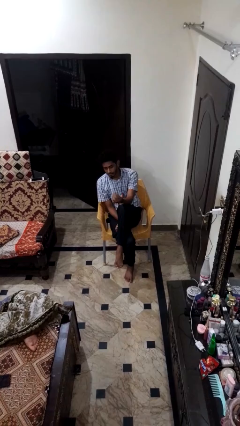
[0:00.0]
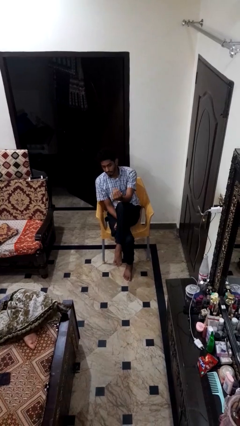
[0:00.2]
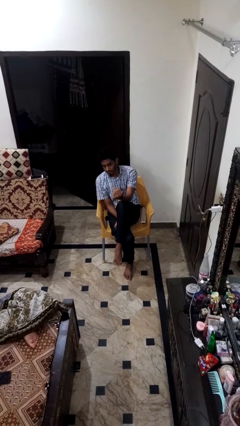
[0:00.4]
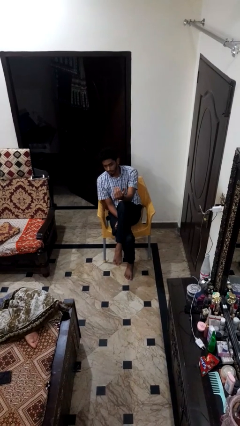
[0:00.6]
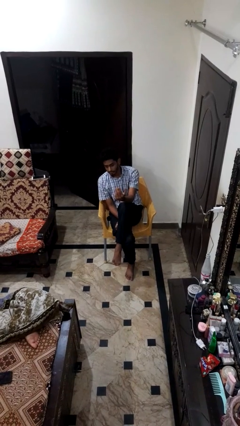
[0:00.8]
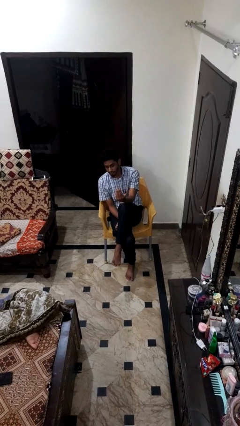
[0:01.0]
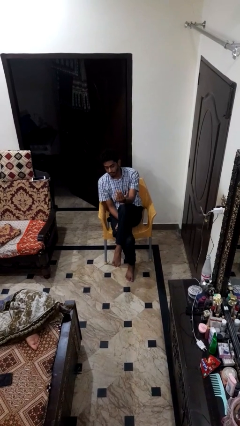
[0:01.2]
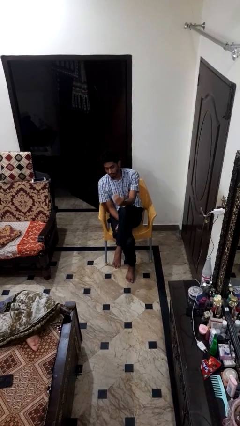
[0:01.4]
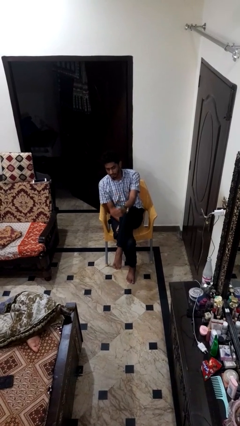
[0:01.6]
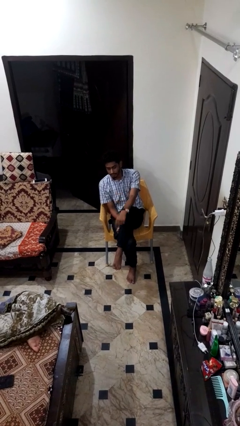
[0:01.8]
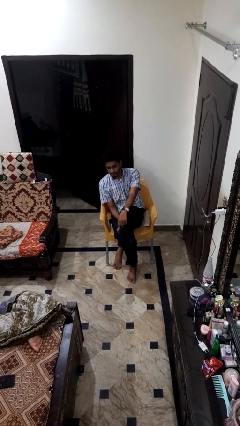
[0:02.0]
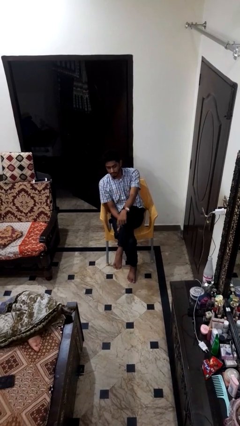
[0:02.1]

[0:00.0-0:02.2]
person gestures come here

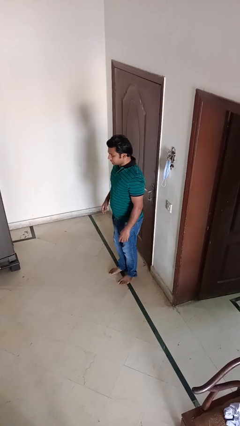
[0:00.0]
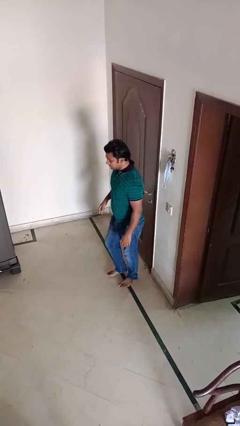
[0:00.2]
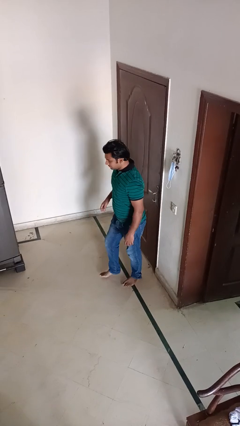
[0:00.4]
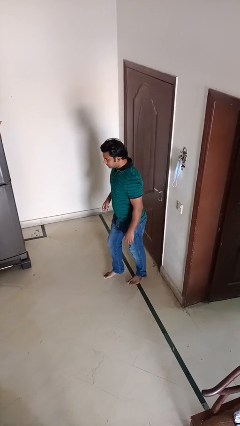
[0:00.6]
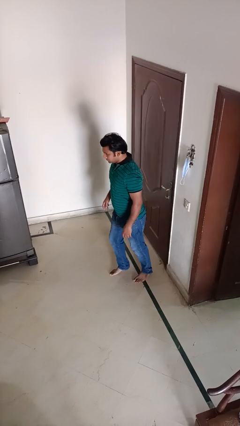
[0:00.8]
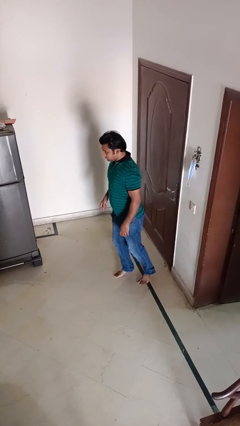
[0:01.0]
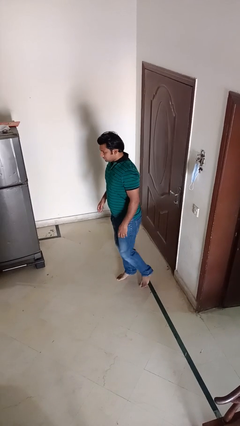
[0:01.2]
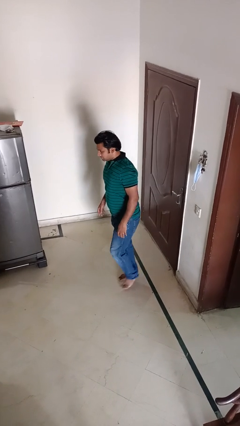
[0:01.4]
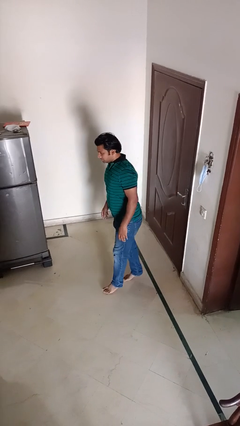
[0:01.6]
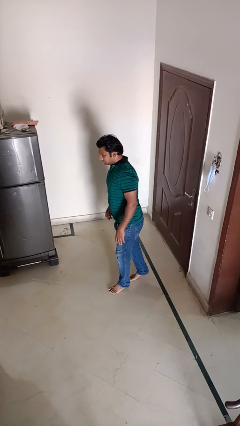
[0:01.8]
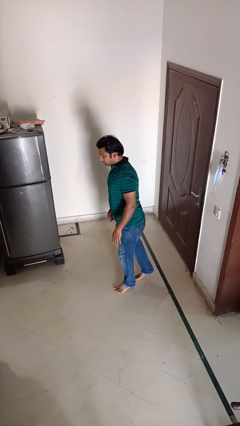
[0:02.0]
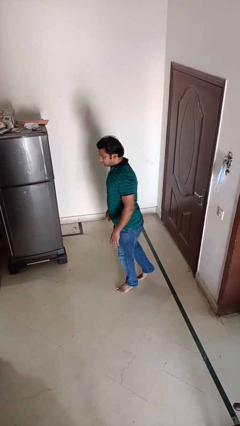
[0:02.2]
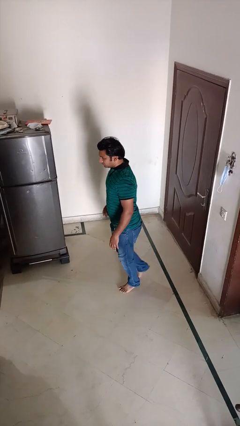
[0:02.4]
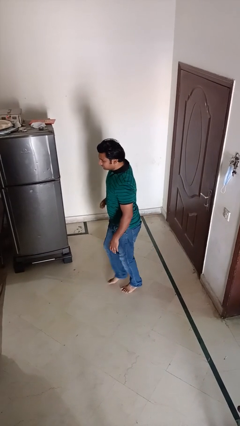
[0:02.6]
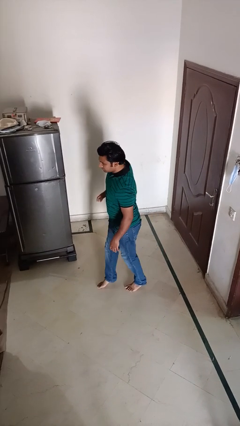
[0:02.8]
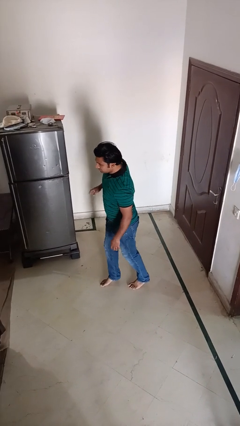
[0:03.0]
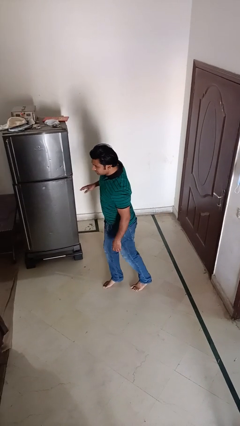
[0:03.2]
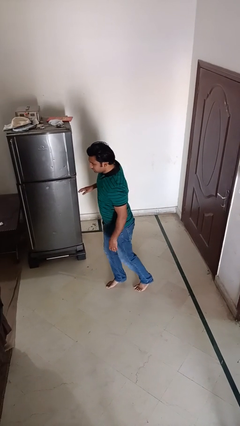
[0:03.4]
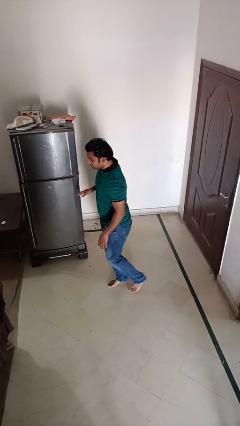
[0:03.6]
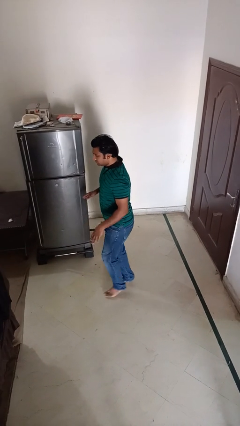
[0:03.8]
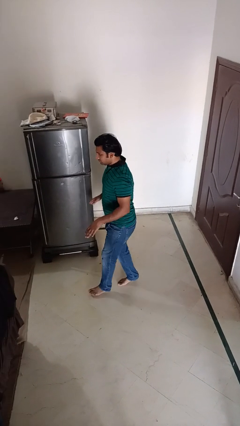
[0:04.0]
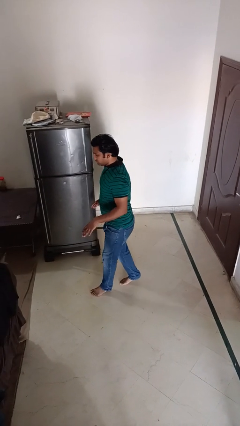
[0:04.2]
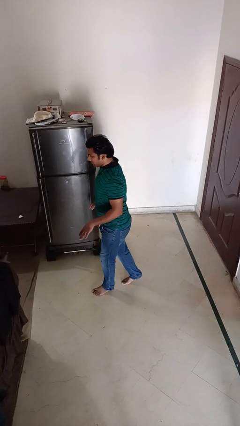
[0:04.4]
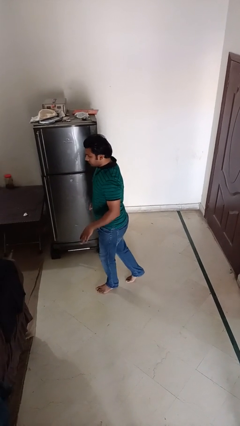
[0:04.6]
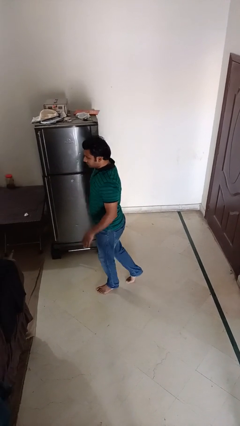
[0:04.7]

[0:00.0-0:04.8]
person walks tiptoe

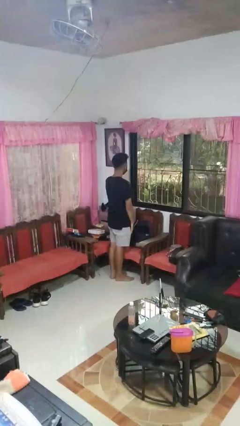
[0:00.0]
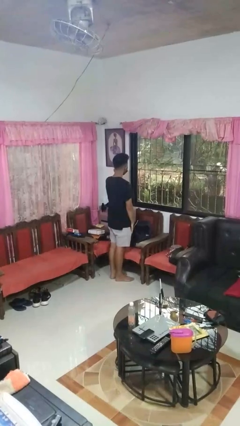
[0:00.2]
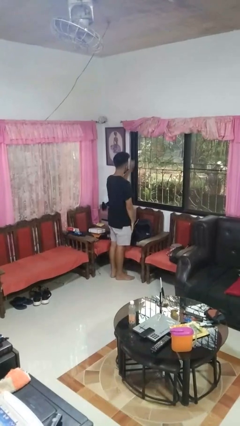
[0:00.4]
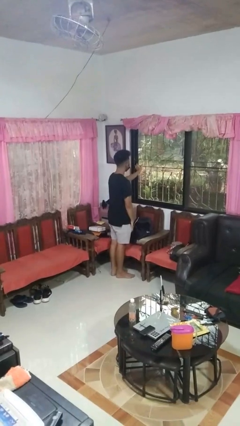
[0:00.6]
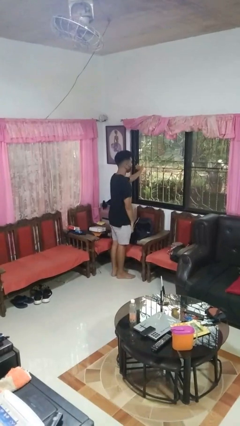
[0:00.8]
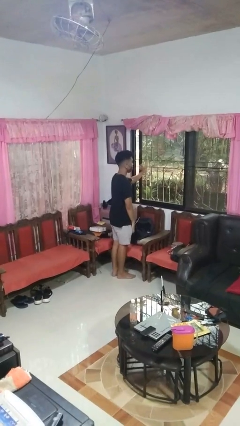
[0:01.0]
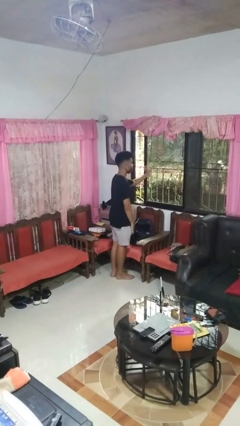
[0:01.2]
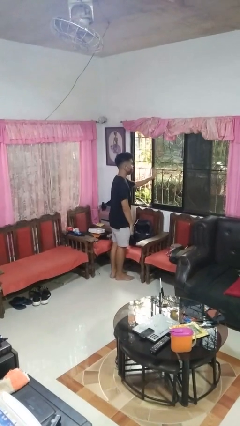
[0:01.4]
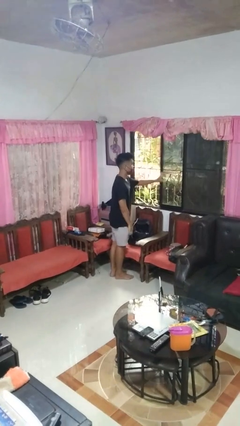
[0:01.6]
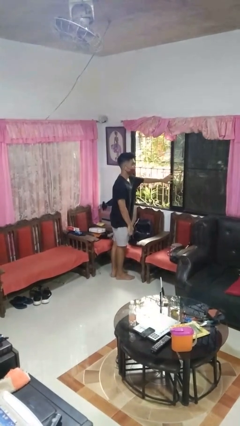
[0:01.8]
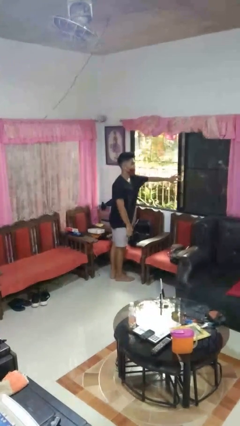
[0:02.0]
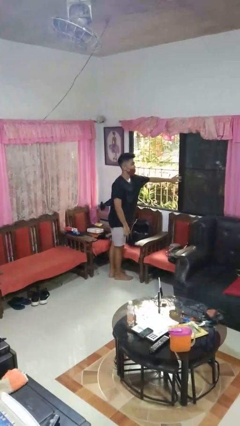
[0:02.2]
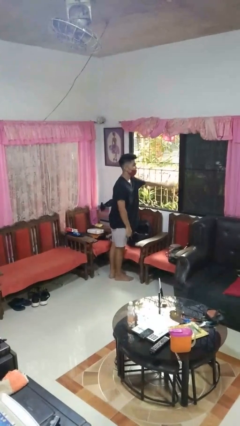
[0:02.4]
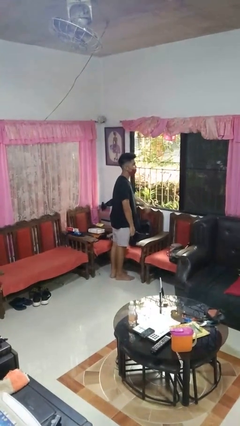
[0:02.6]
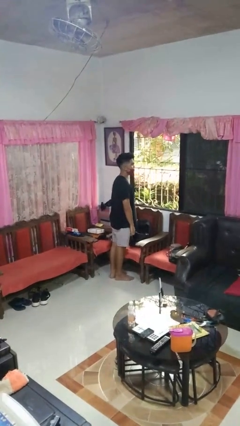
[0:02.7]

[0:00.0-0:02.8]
person opens home window

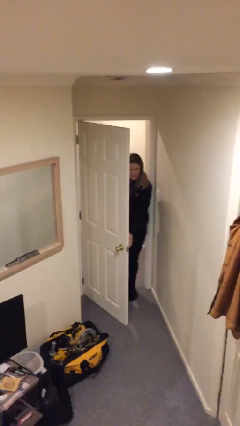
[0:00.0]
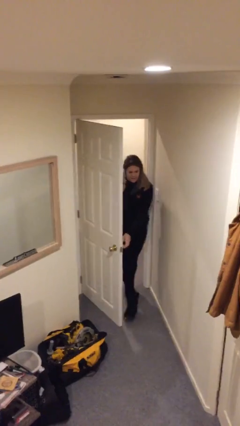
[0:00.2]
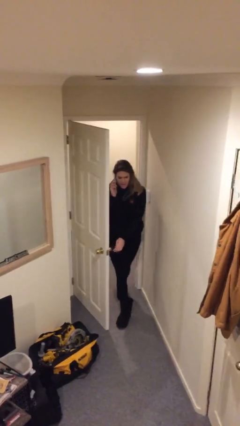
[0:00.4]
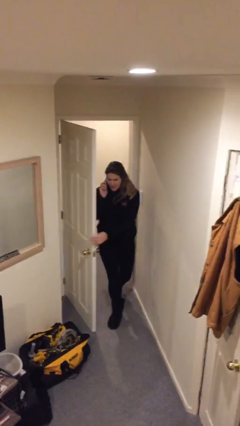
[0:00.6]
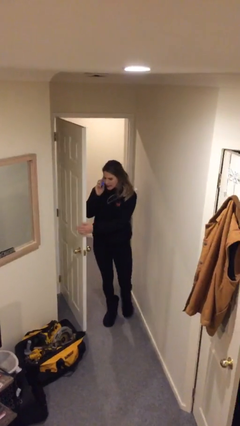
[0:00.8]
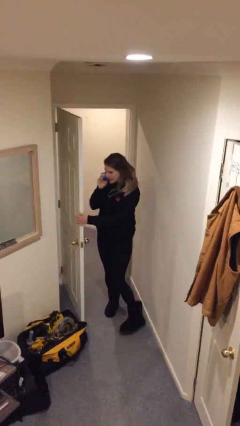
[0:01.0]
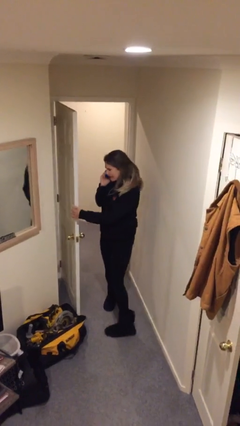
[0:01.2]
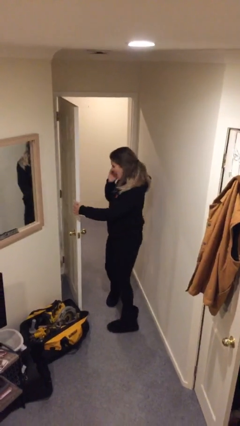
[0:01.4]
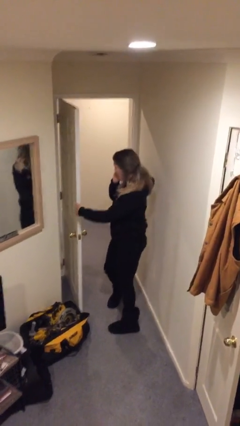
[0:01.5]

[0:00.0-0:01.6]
person enters scene through structure

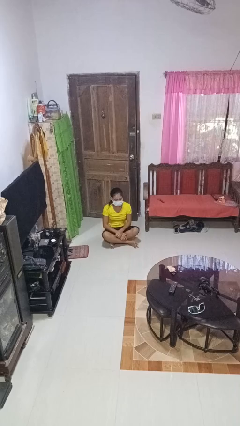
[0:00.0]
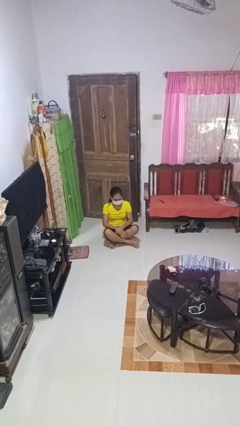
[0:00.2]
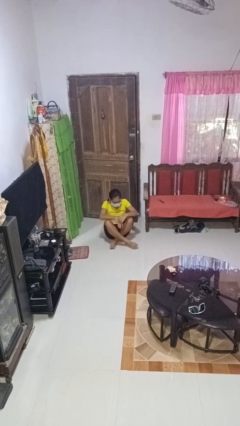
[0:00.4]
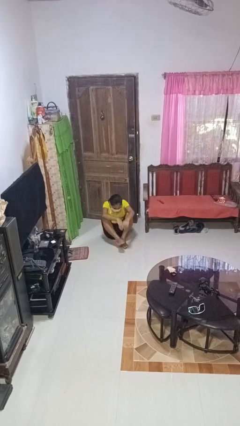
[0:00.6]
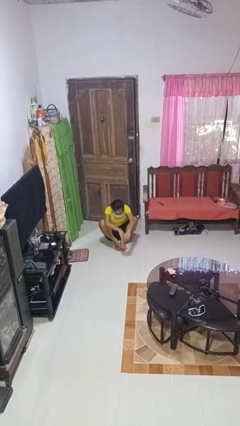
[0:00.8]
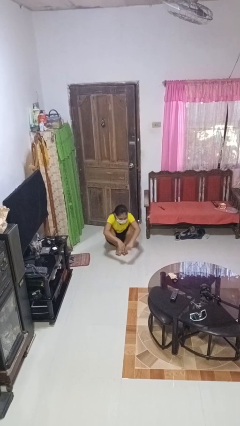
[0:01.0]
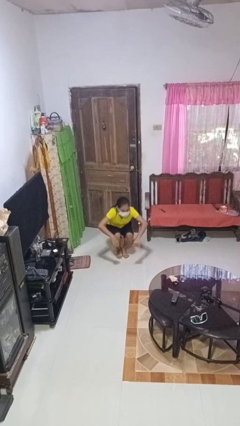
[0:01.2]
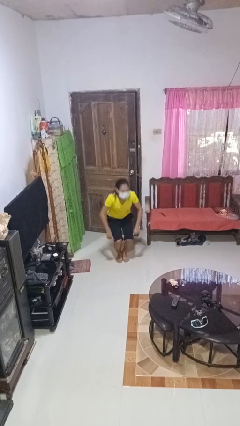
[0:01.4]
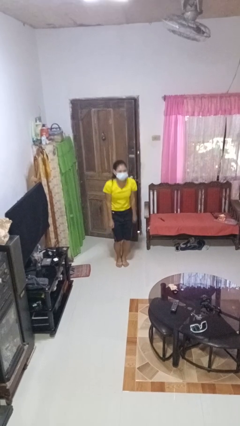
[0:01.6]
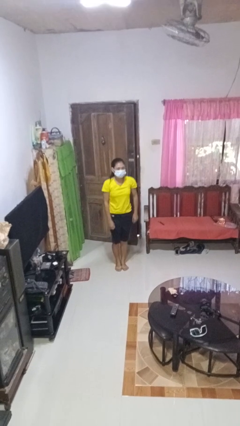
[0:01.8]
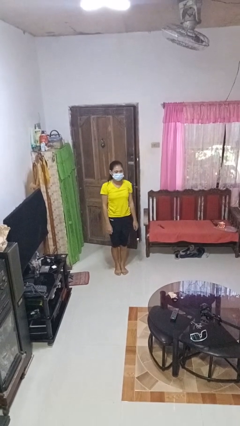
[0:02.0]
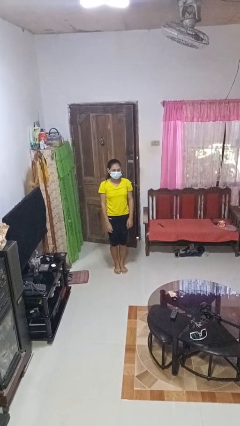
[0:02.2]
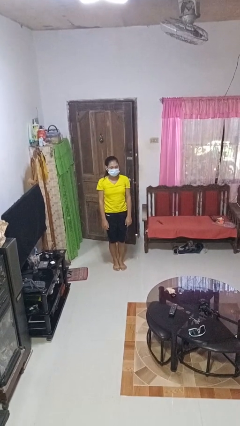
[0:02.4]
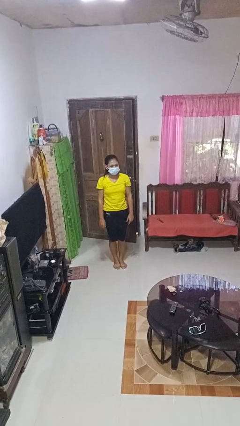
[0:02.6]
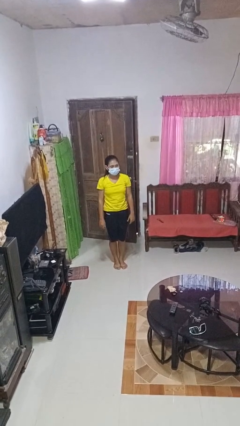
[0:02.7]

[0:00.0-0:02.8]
person stands up from floor

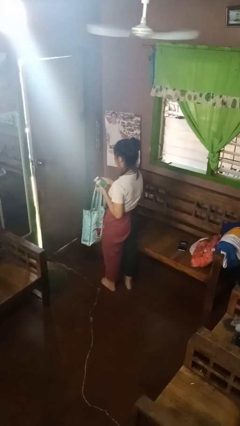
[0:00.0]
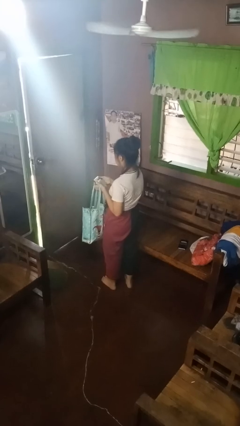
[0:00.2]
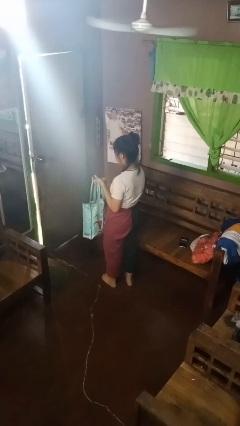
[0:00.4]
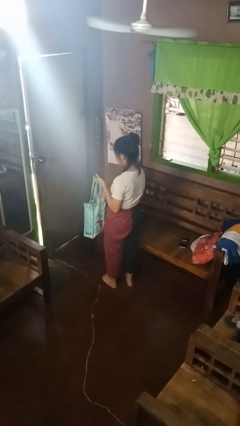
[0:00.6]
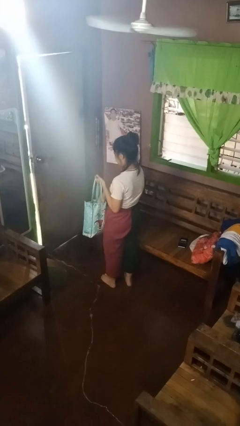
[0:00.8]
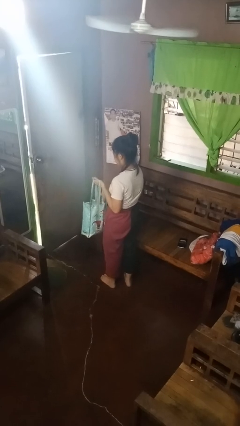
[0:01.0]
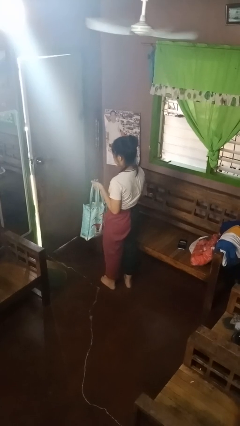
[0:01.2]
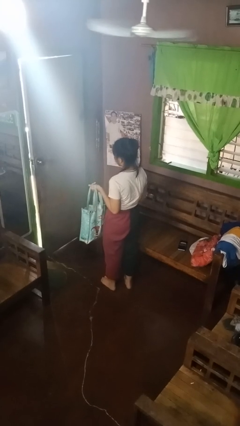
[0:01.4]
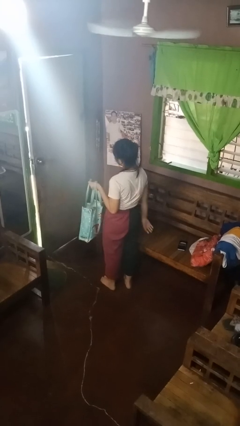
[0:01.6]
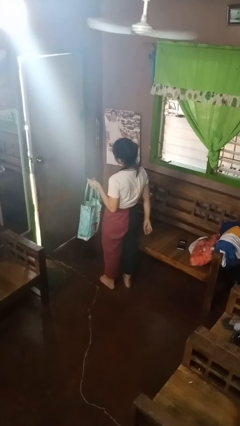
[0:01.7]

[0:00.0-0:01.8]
person puts object into bag

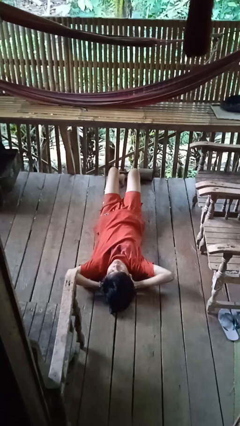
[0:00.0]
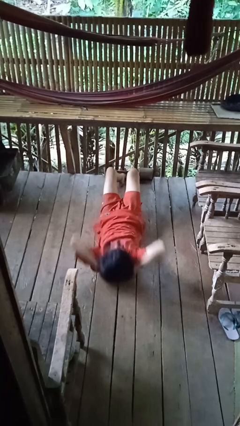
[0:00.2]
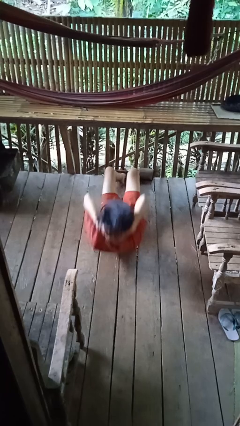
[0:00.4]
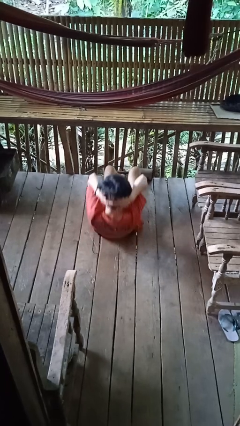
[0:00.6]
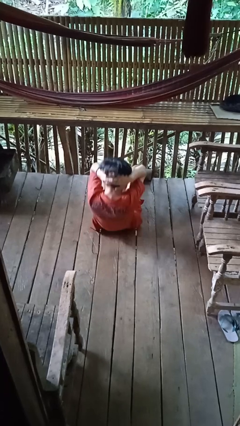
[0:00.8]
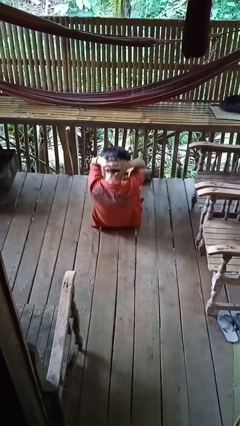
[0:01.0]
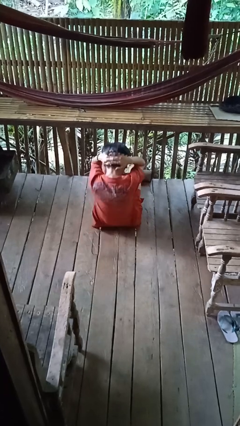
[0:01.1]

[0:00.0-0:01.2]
person exercises with situp
